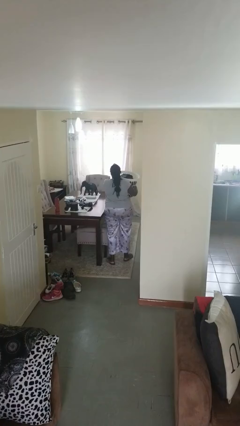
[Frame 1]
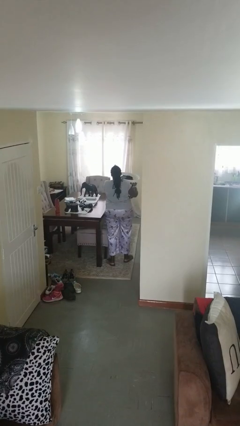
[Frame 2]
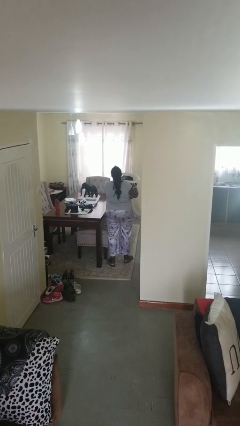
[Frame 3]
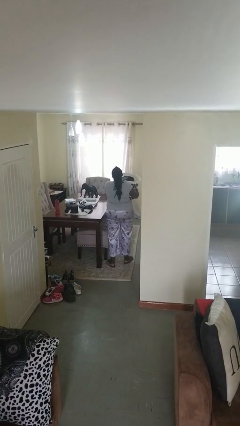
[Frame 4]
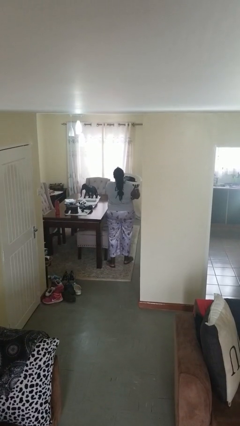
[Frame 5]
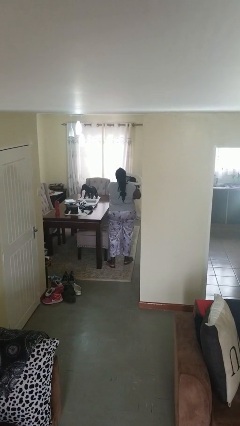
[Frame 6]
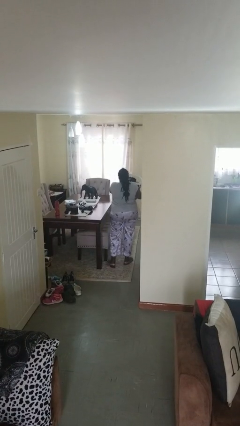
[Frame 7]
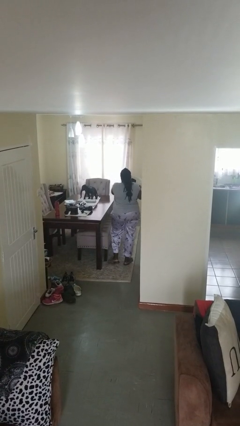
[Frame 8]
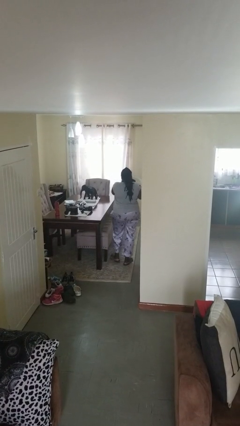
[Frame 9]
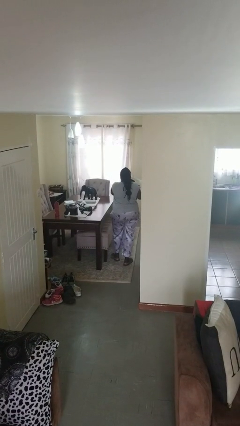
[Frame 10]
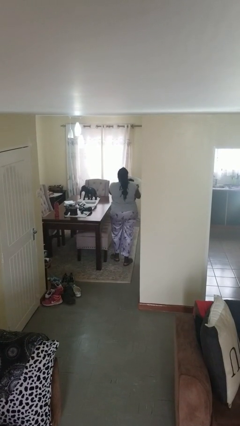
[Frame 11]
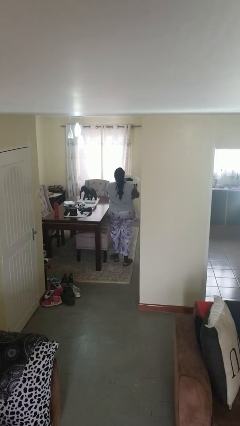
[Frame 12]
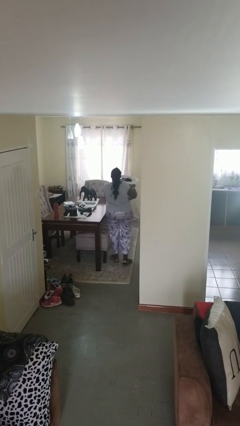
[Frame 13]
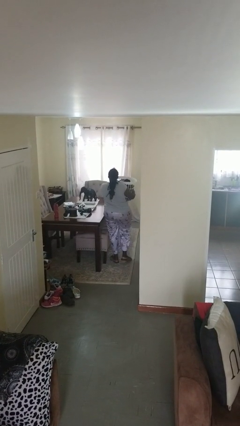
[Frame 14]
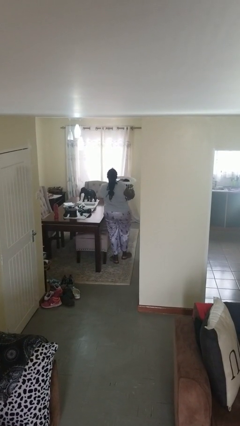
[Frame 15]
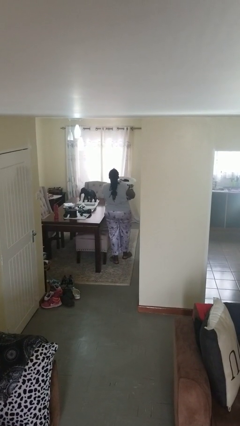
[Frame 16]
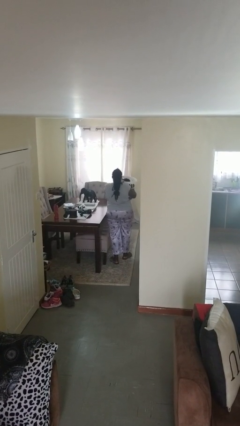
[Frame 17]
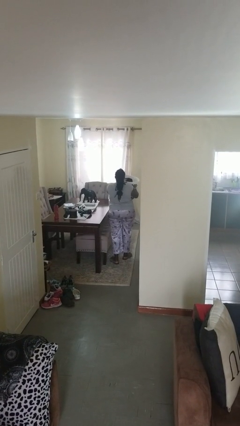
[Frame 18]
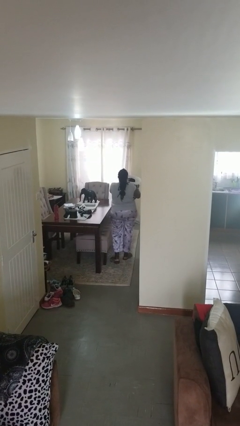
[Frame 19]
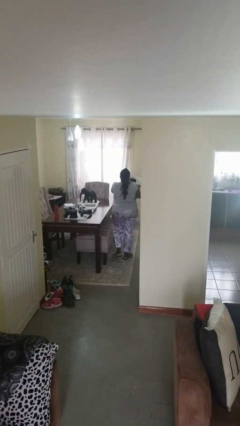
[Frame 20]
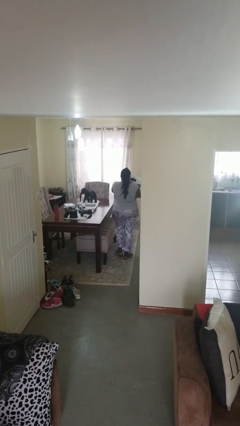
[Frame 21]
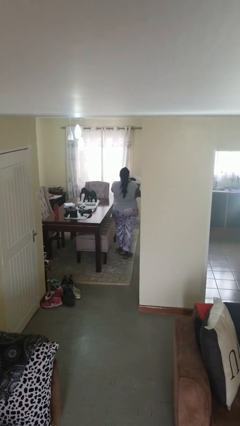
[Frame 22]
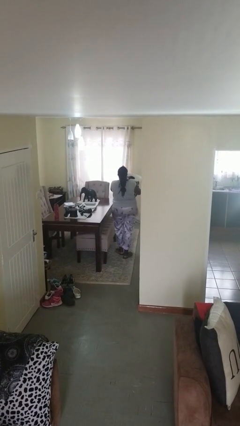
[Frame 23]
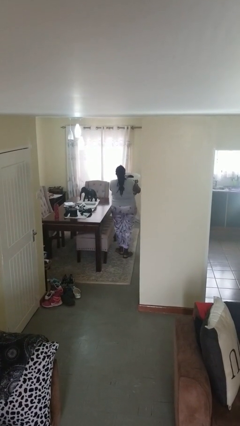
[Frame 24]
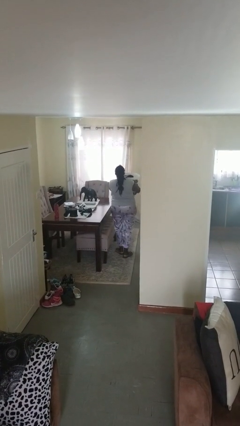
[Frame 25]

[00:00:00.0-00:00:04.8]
person carries laundry basket

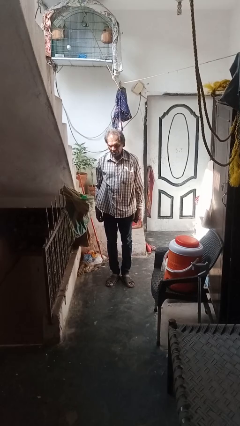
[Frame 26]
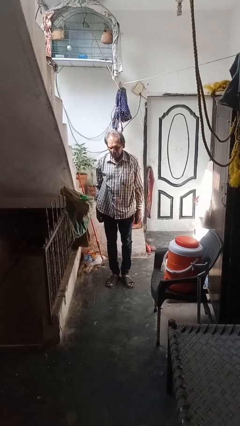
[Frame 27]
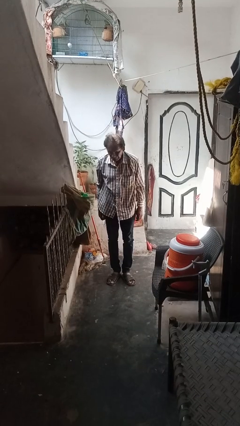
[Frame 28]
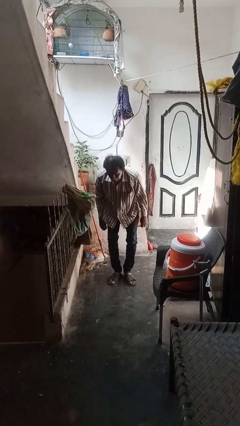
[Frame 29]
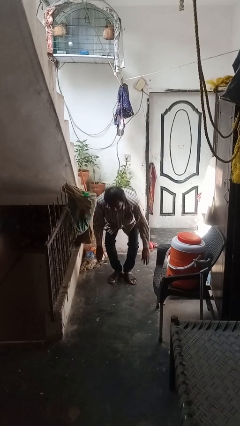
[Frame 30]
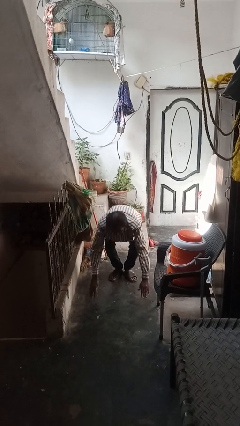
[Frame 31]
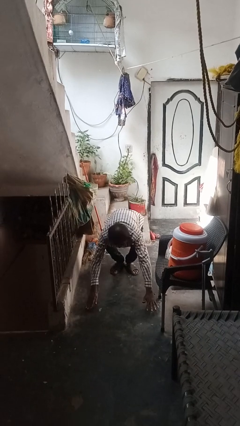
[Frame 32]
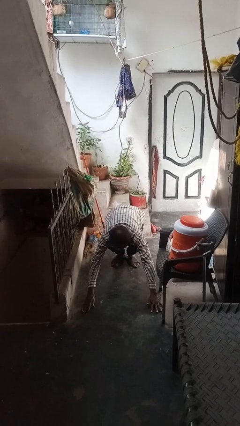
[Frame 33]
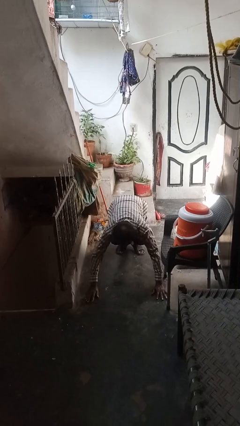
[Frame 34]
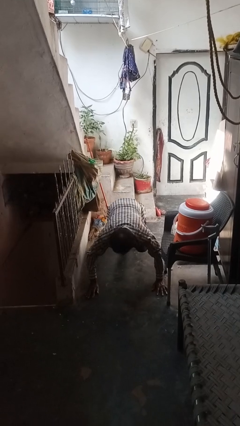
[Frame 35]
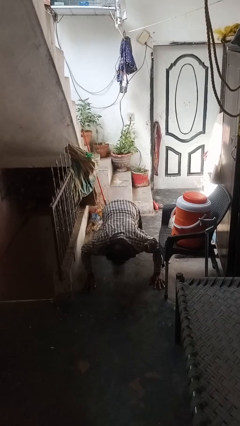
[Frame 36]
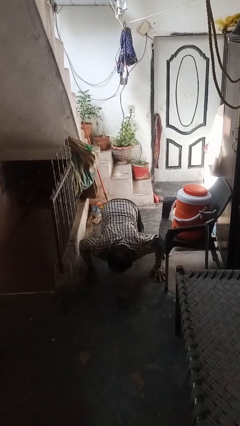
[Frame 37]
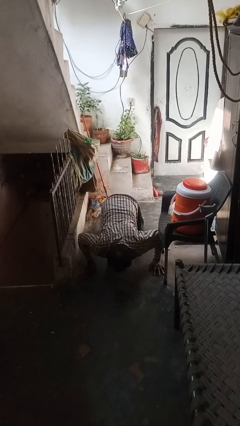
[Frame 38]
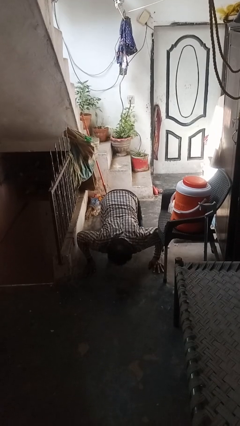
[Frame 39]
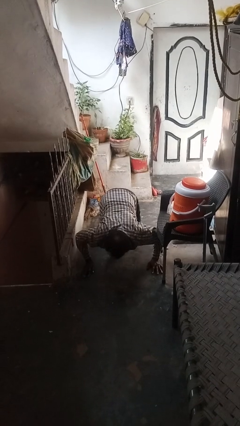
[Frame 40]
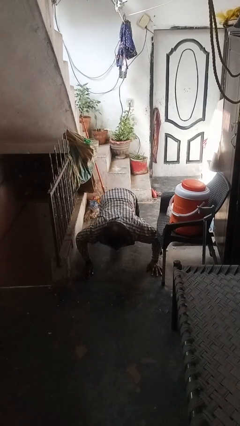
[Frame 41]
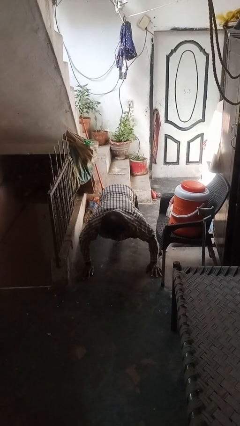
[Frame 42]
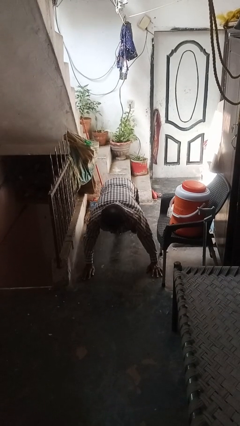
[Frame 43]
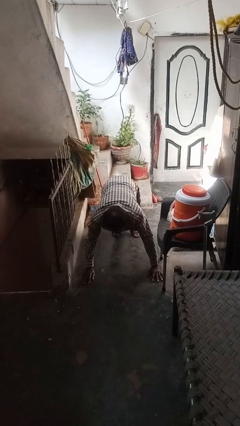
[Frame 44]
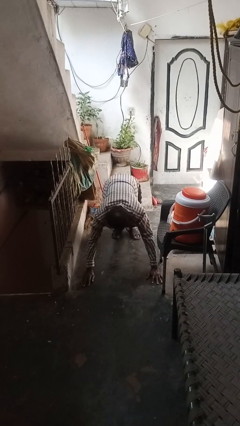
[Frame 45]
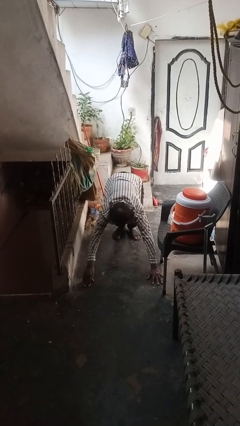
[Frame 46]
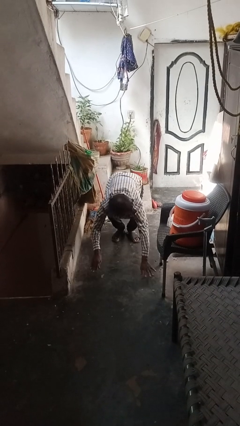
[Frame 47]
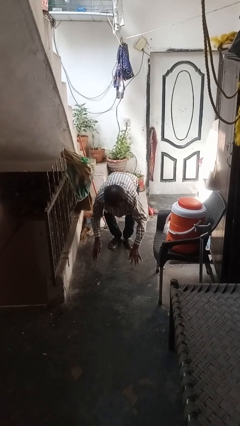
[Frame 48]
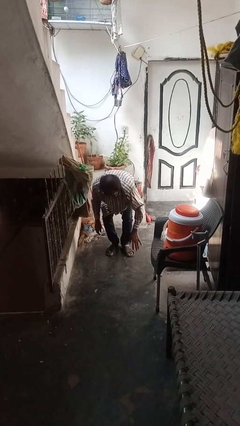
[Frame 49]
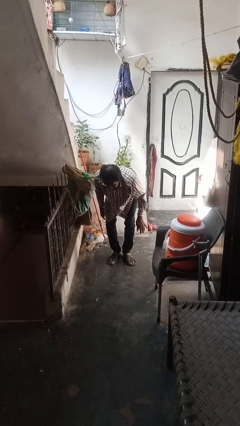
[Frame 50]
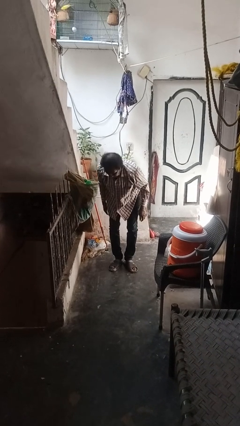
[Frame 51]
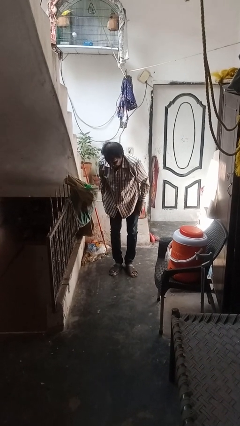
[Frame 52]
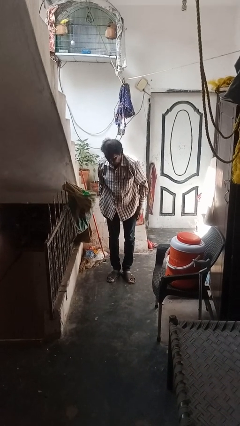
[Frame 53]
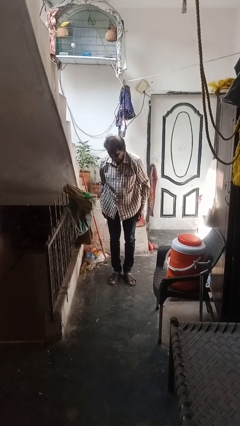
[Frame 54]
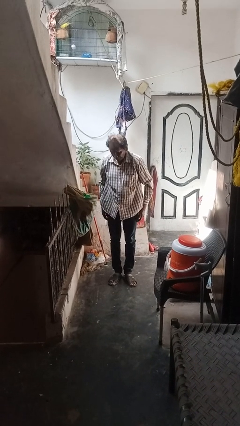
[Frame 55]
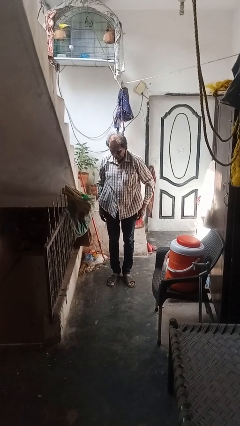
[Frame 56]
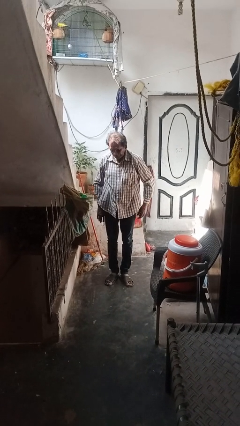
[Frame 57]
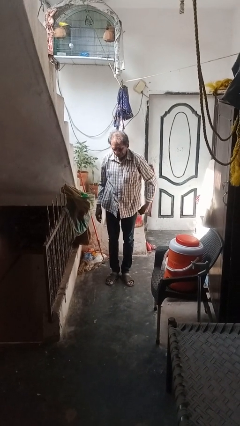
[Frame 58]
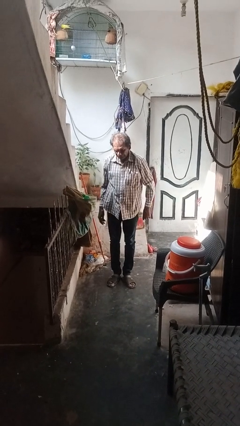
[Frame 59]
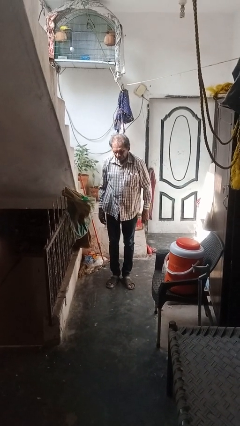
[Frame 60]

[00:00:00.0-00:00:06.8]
person exercises with pushup

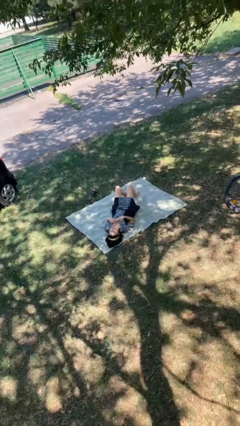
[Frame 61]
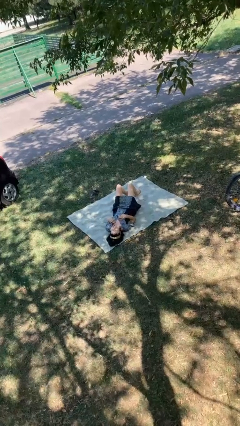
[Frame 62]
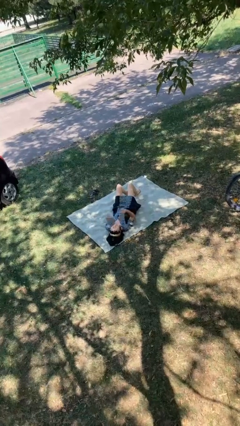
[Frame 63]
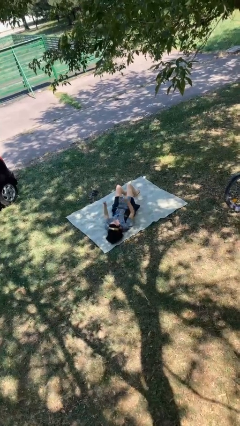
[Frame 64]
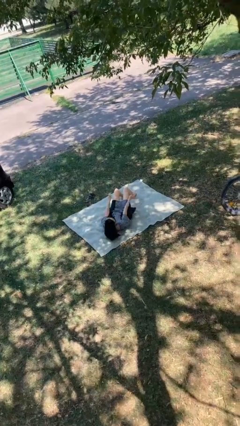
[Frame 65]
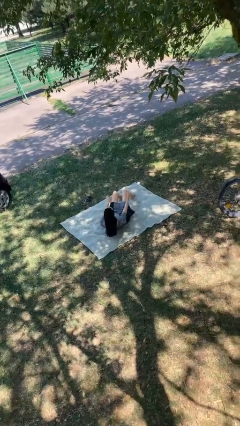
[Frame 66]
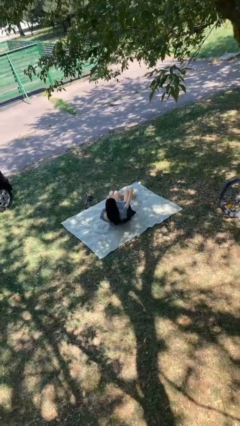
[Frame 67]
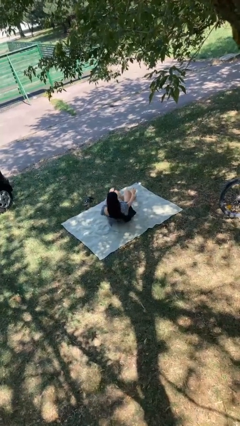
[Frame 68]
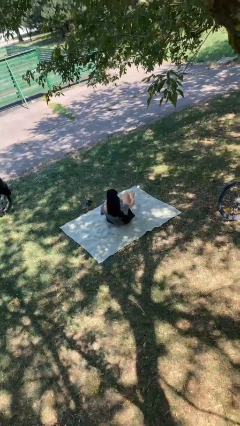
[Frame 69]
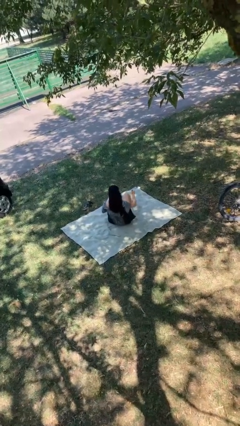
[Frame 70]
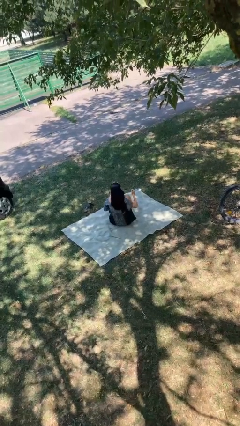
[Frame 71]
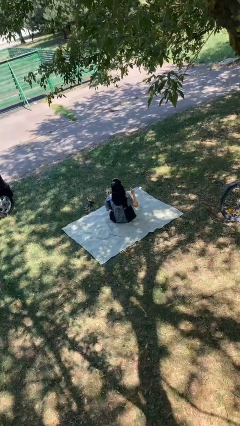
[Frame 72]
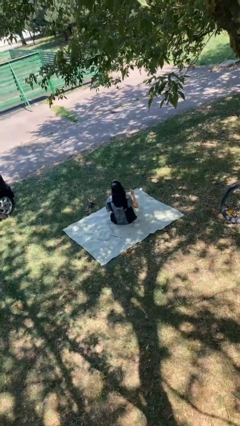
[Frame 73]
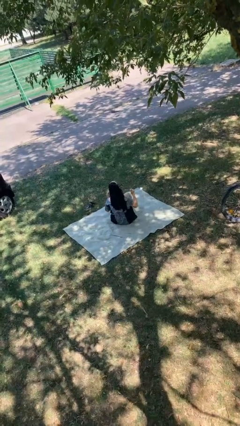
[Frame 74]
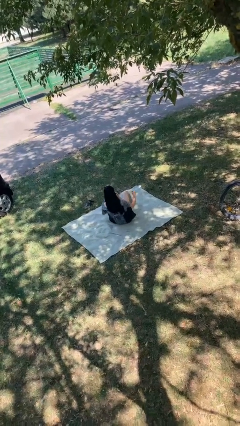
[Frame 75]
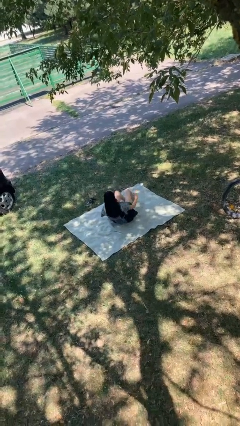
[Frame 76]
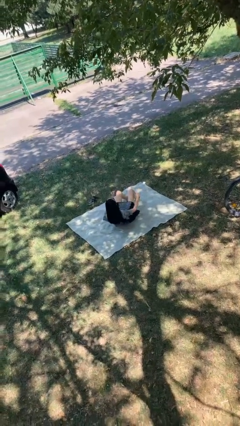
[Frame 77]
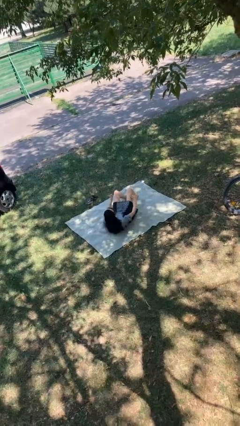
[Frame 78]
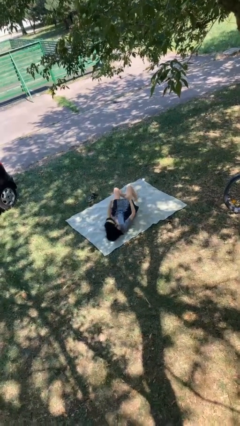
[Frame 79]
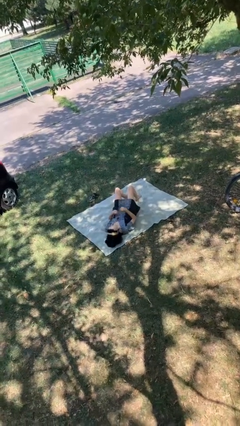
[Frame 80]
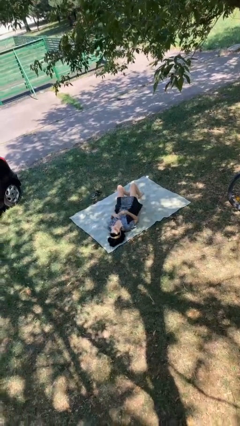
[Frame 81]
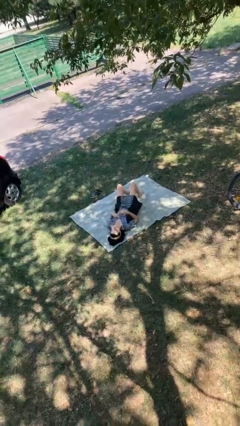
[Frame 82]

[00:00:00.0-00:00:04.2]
person exercises with situp

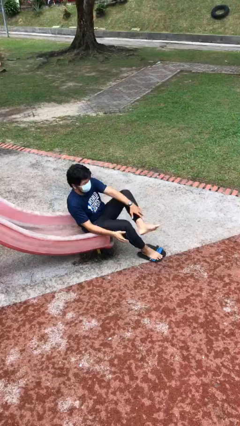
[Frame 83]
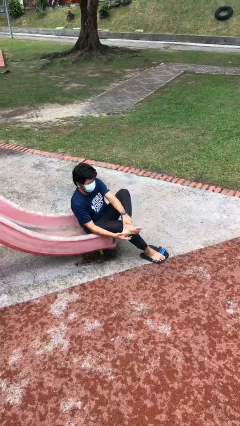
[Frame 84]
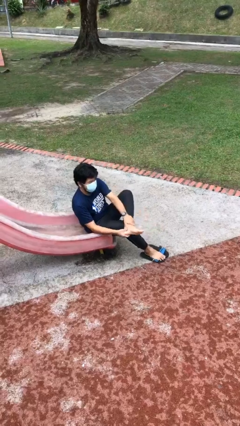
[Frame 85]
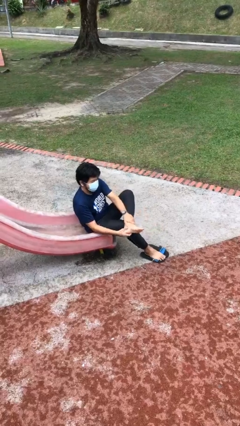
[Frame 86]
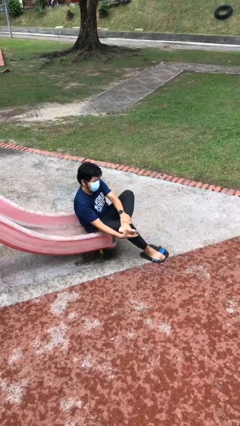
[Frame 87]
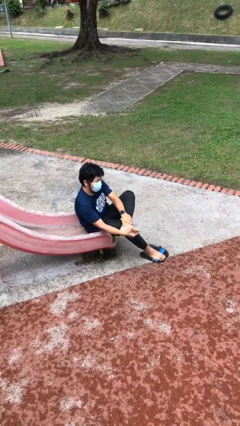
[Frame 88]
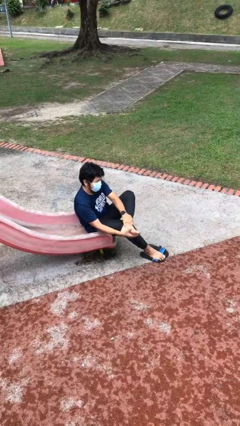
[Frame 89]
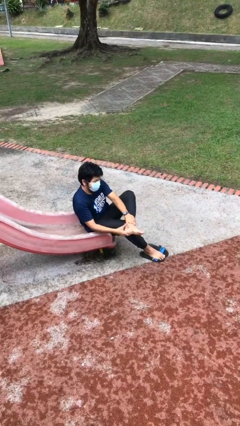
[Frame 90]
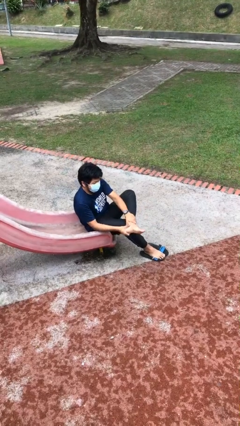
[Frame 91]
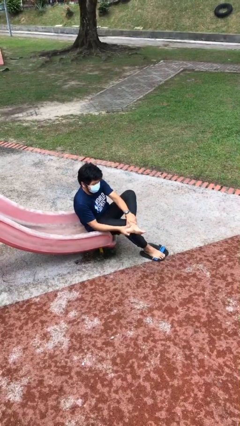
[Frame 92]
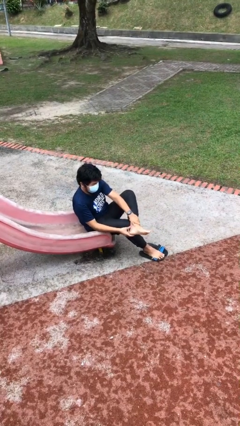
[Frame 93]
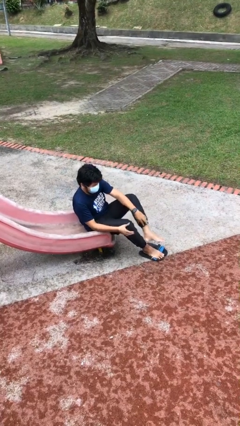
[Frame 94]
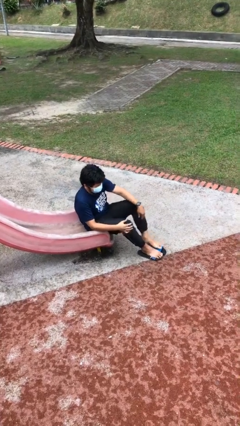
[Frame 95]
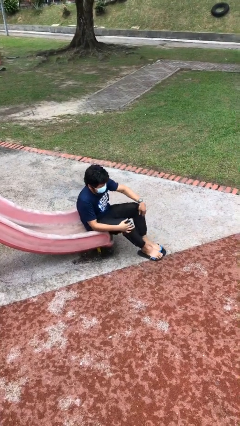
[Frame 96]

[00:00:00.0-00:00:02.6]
person rubs foot
